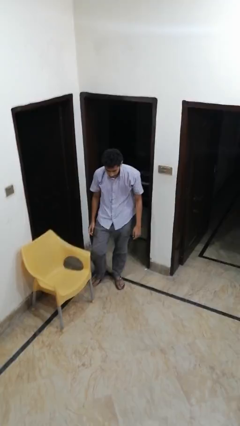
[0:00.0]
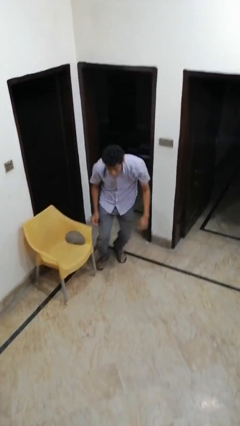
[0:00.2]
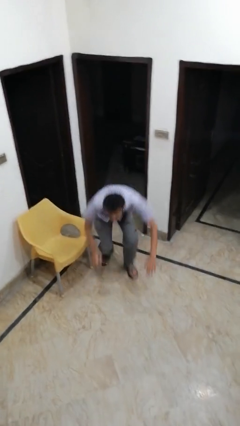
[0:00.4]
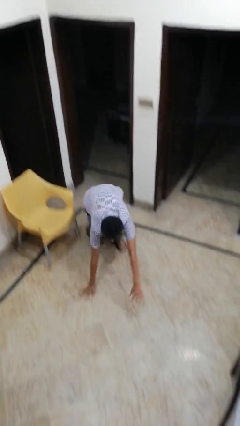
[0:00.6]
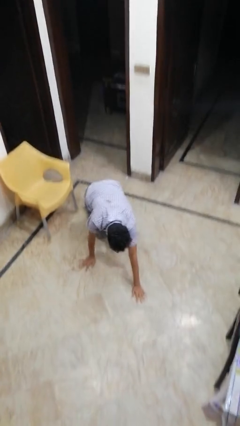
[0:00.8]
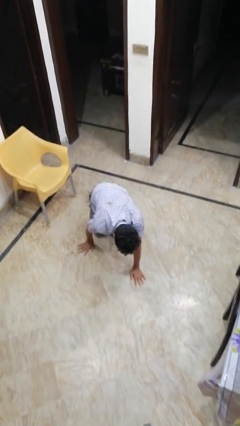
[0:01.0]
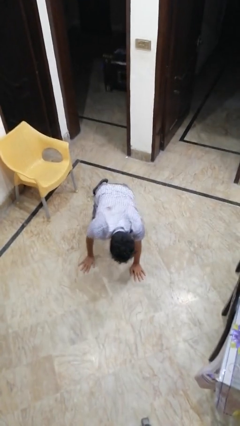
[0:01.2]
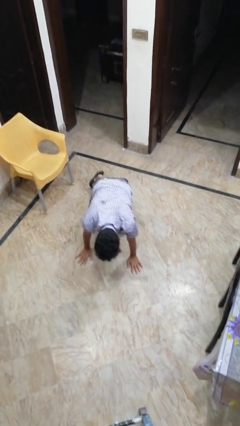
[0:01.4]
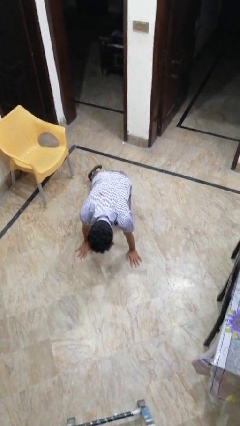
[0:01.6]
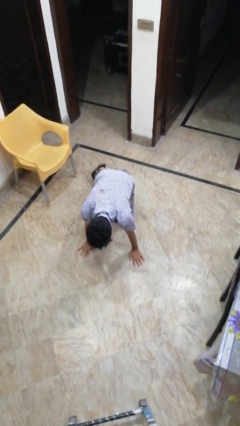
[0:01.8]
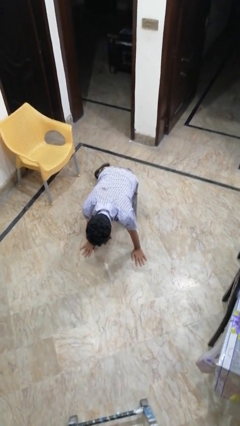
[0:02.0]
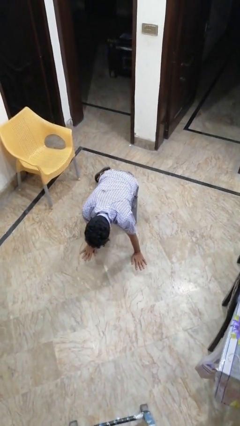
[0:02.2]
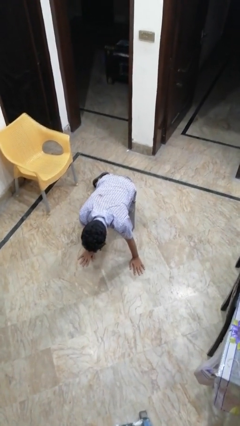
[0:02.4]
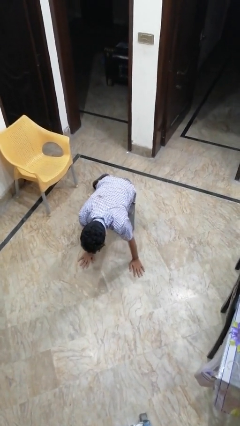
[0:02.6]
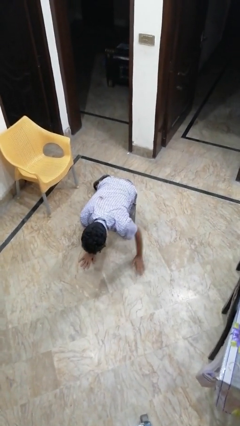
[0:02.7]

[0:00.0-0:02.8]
person trips on object on floor

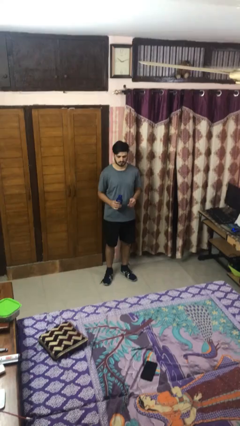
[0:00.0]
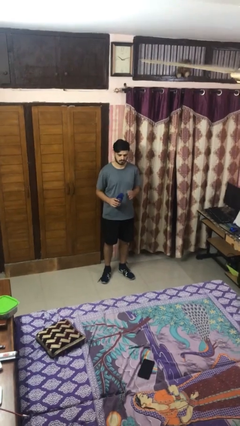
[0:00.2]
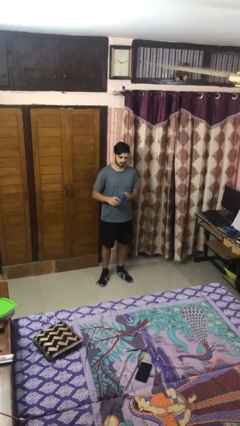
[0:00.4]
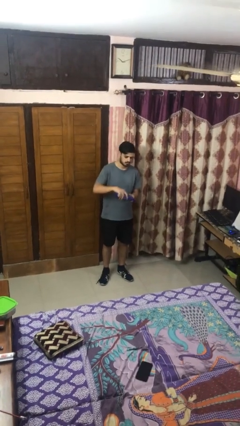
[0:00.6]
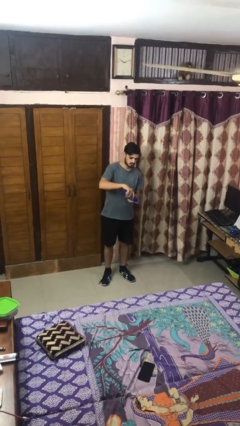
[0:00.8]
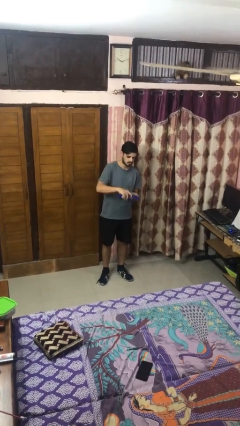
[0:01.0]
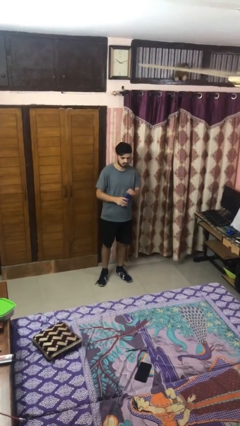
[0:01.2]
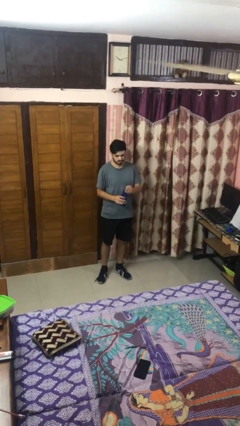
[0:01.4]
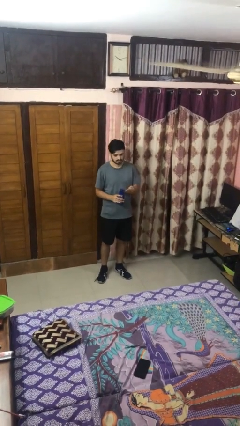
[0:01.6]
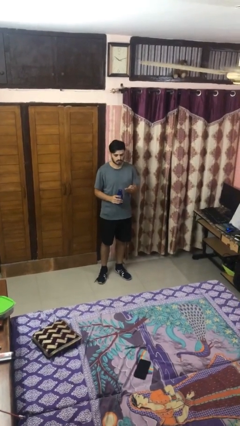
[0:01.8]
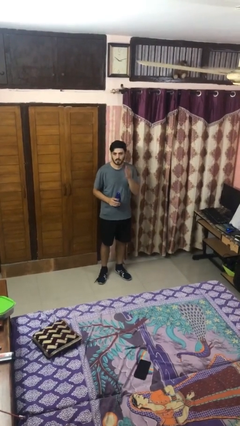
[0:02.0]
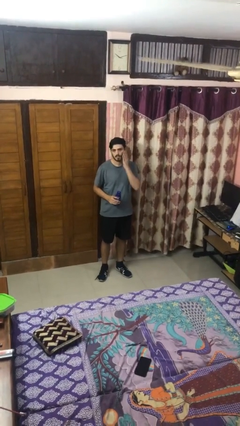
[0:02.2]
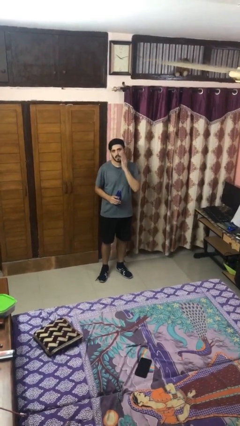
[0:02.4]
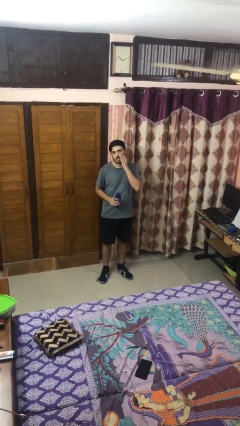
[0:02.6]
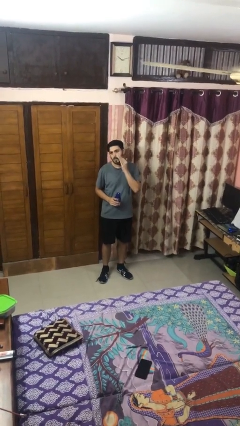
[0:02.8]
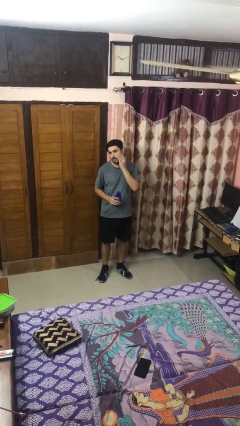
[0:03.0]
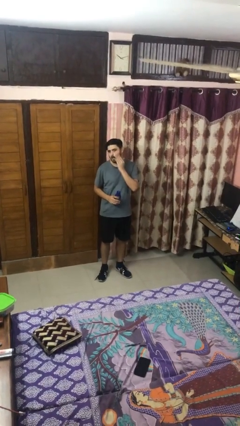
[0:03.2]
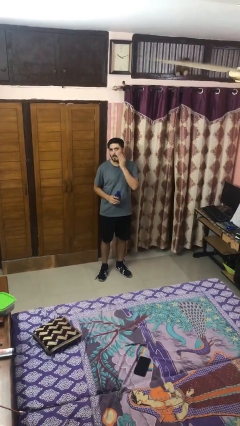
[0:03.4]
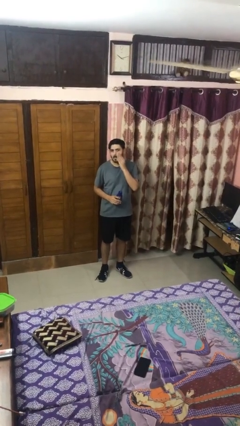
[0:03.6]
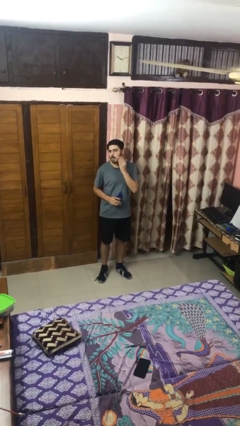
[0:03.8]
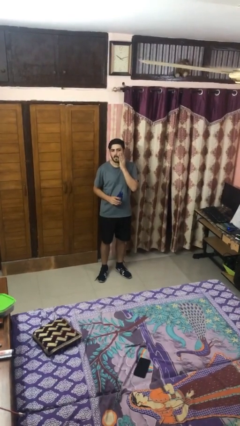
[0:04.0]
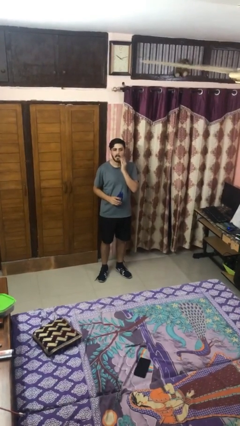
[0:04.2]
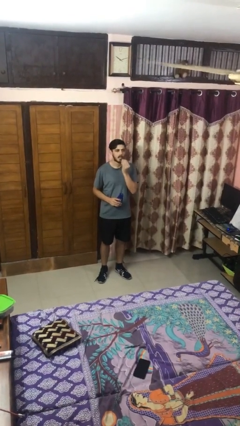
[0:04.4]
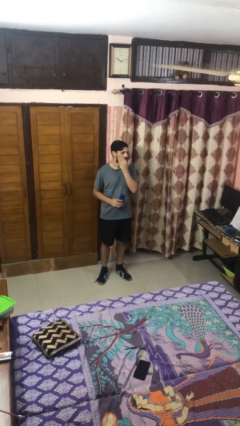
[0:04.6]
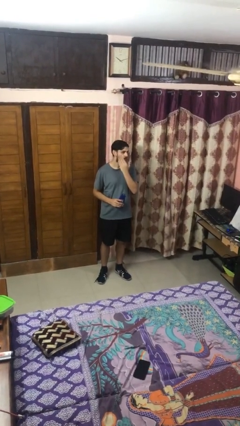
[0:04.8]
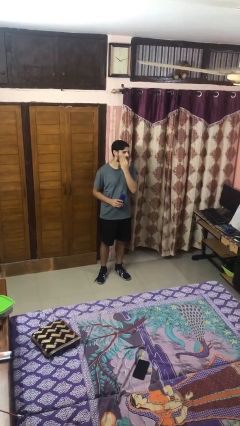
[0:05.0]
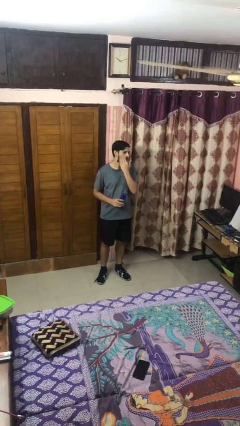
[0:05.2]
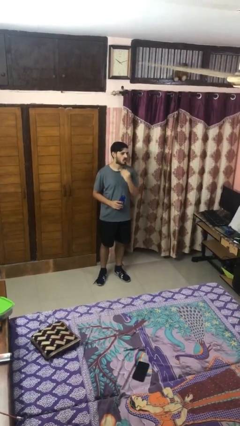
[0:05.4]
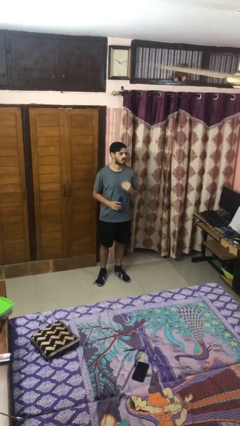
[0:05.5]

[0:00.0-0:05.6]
person applies facial moisturizer

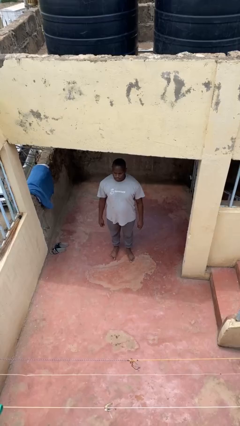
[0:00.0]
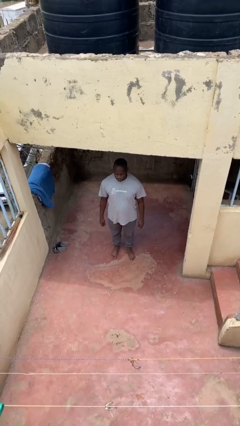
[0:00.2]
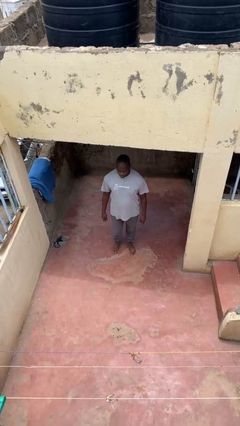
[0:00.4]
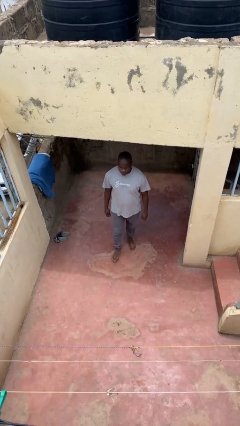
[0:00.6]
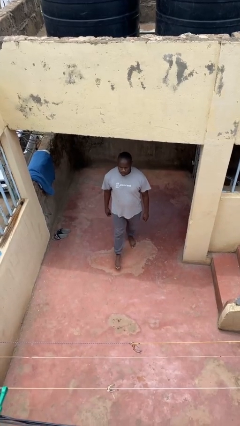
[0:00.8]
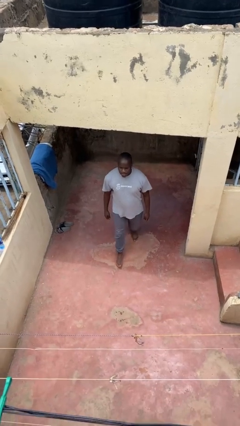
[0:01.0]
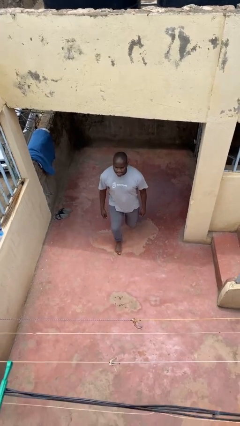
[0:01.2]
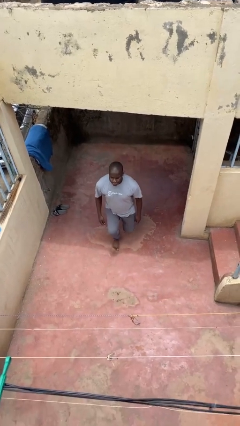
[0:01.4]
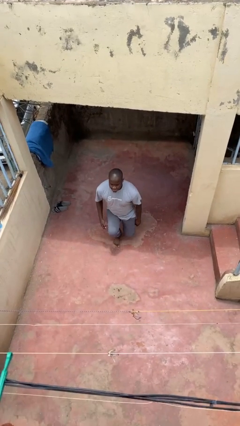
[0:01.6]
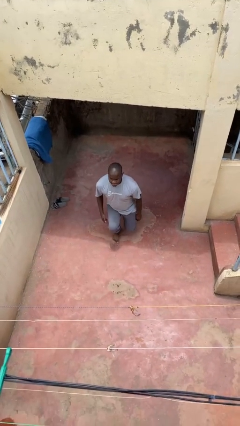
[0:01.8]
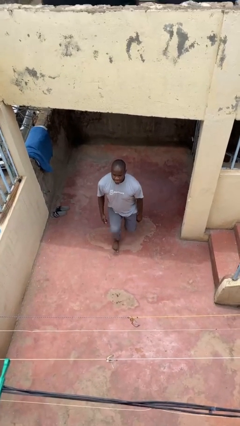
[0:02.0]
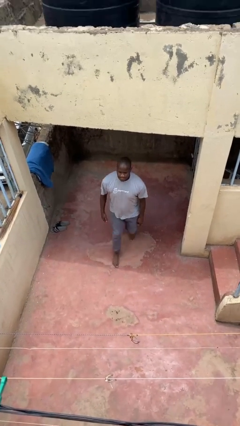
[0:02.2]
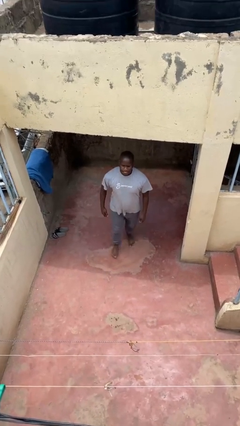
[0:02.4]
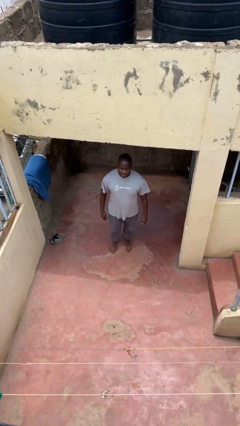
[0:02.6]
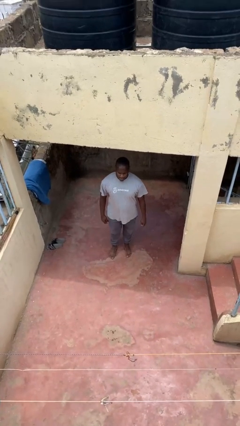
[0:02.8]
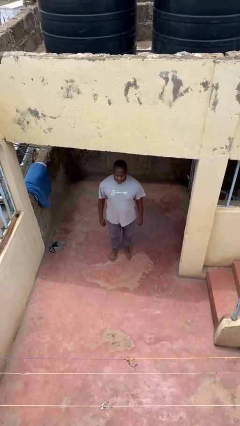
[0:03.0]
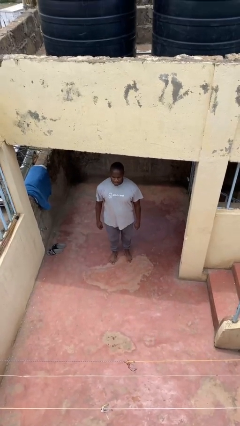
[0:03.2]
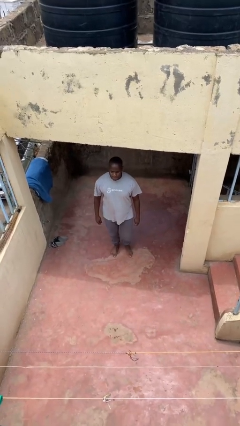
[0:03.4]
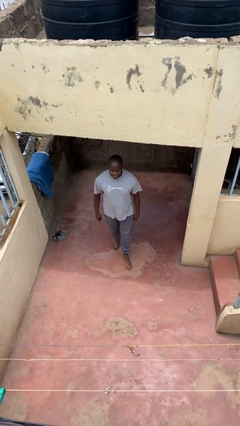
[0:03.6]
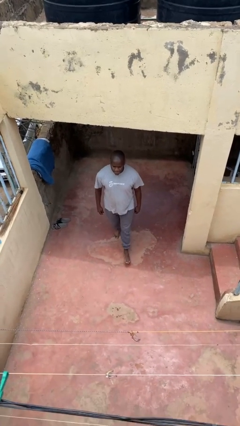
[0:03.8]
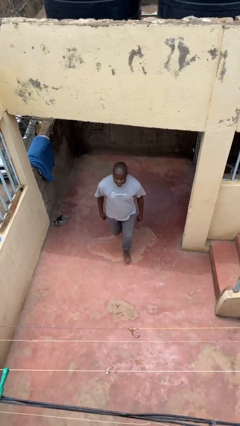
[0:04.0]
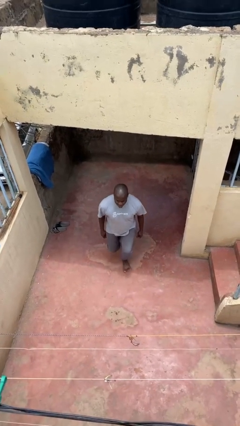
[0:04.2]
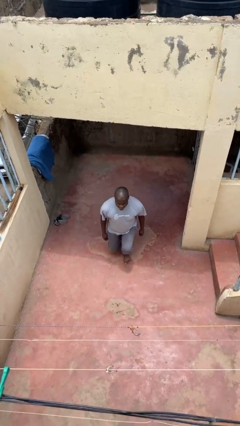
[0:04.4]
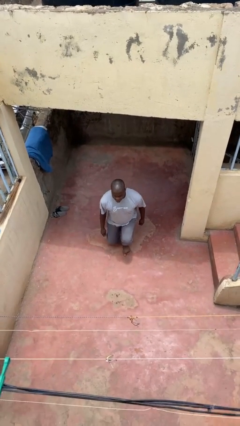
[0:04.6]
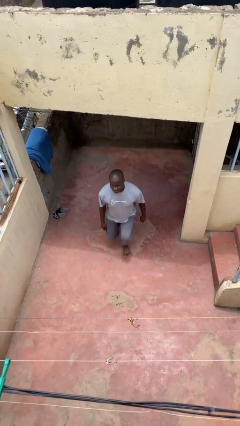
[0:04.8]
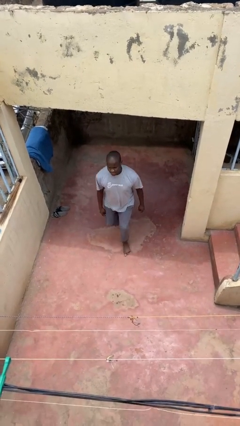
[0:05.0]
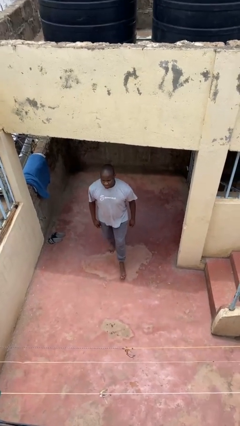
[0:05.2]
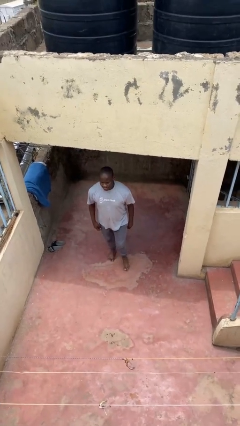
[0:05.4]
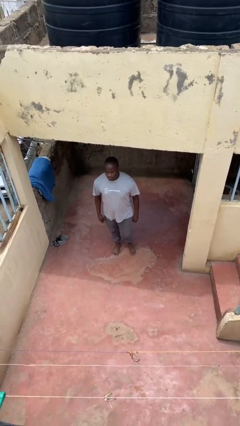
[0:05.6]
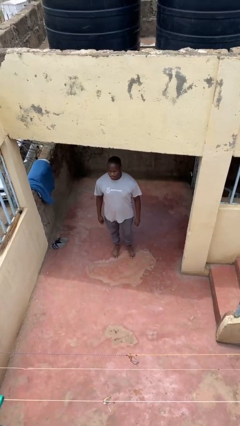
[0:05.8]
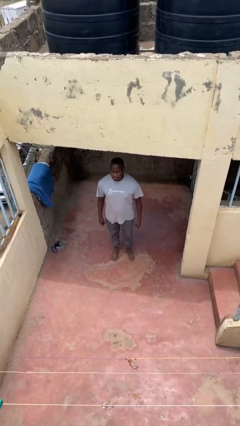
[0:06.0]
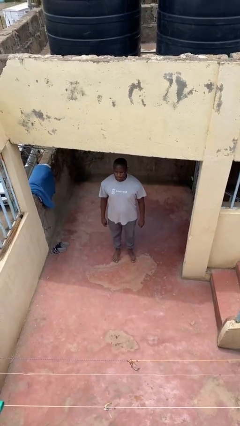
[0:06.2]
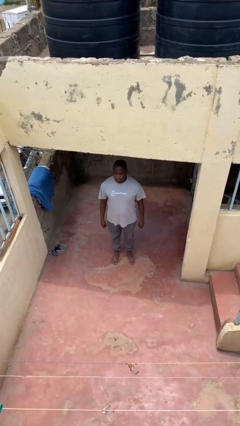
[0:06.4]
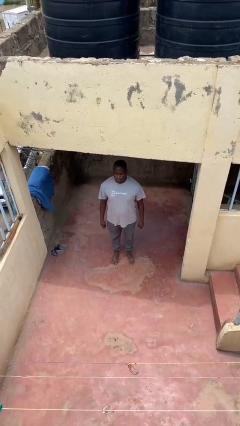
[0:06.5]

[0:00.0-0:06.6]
person exercises with lunges

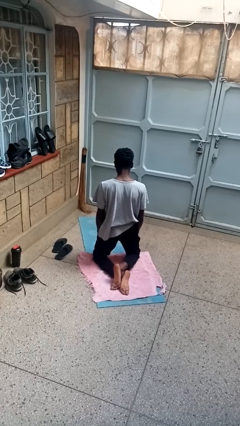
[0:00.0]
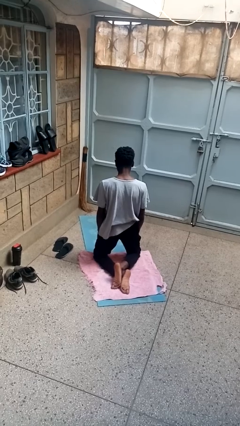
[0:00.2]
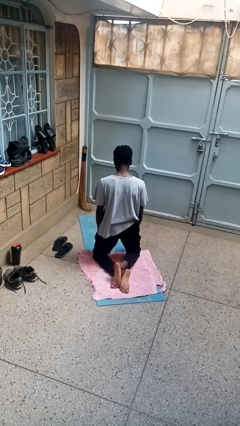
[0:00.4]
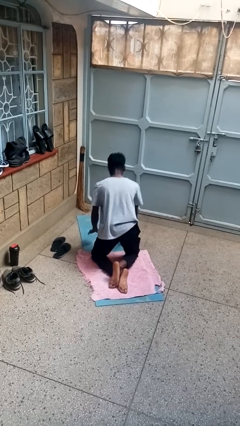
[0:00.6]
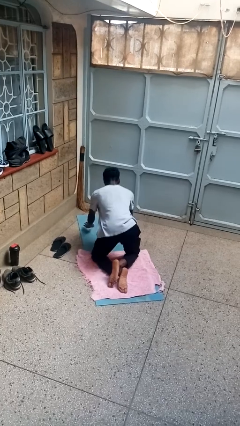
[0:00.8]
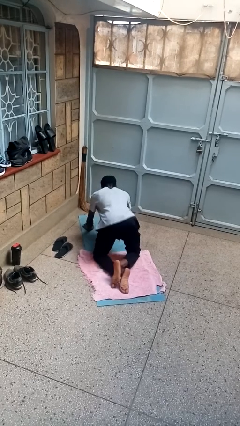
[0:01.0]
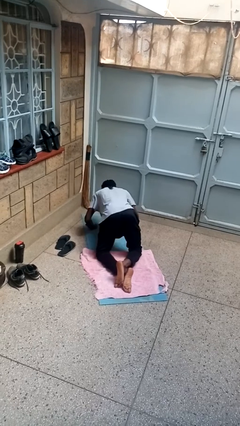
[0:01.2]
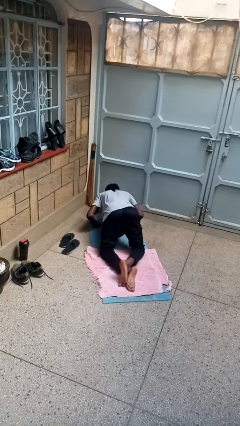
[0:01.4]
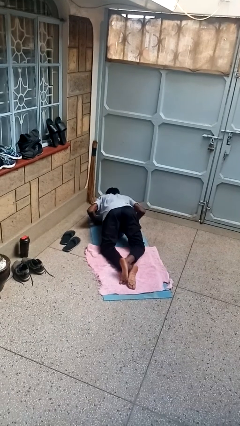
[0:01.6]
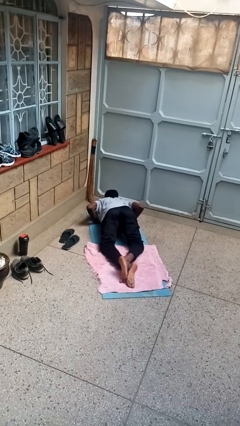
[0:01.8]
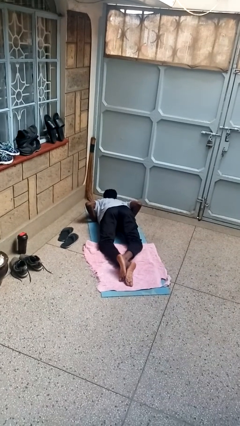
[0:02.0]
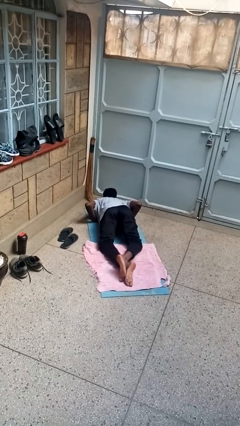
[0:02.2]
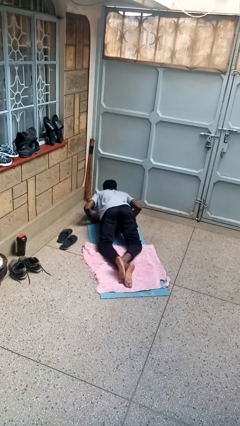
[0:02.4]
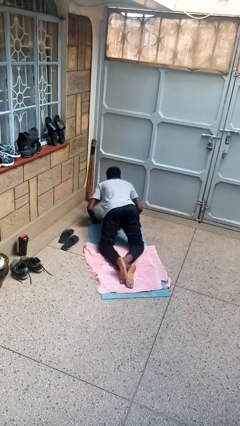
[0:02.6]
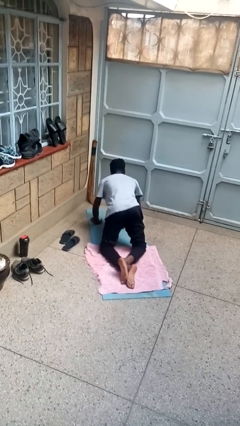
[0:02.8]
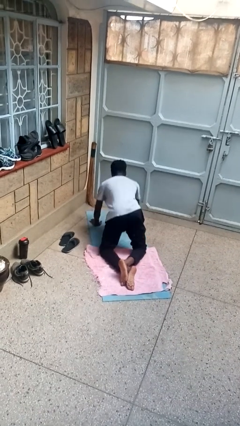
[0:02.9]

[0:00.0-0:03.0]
person exercises with pushup
